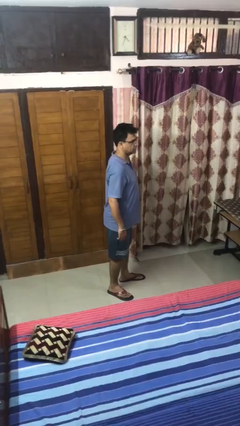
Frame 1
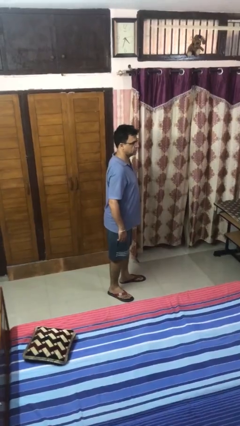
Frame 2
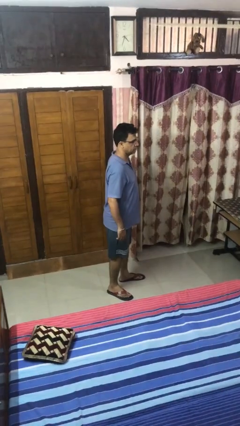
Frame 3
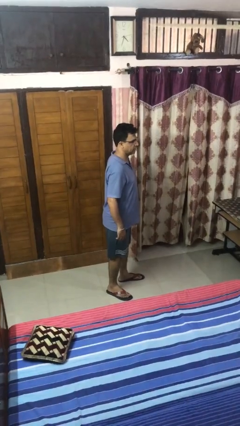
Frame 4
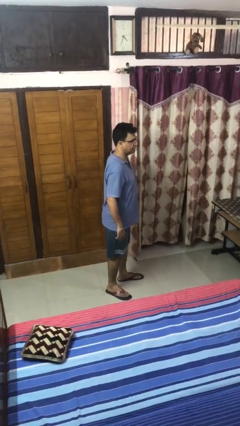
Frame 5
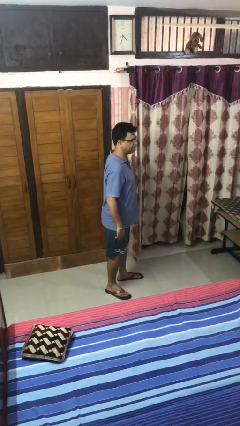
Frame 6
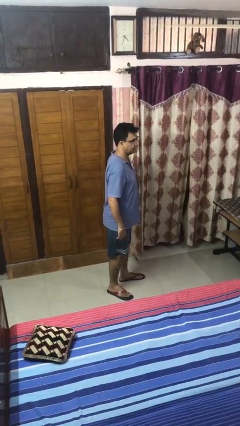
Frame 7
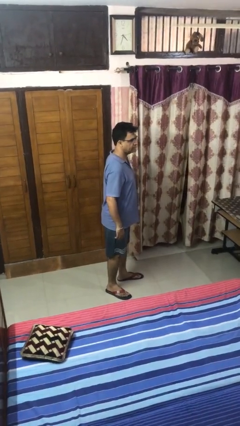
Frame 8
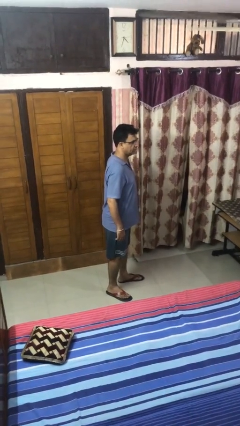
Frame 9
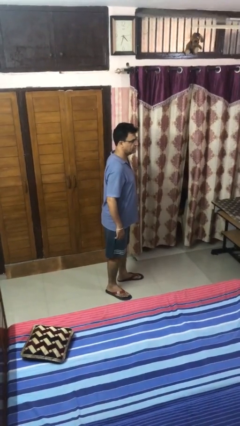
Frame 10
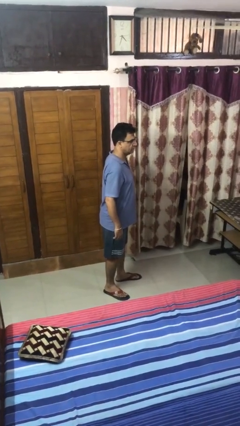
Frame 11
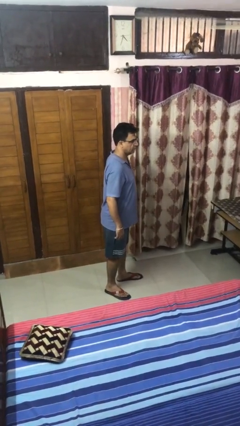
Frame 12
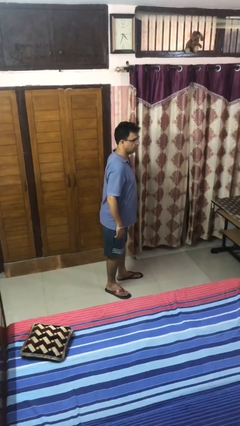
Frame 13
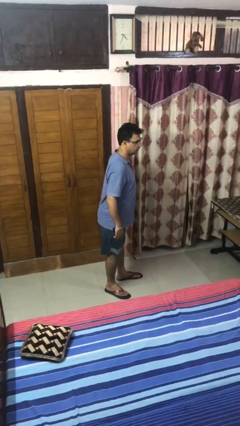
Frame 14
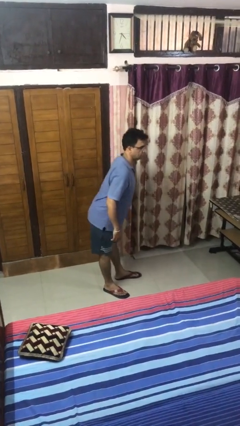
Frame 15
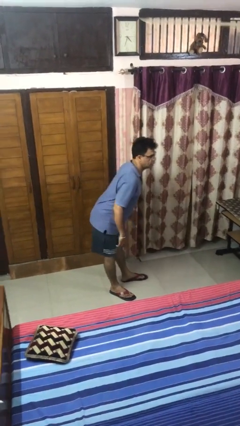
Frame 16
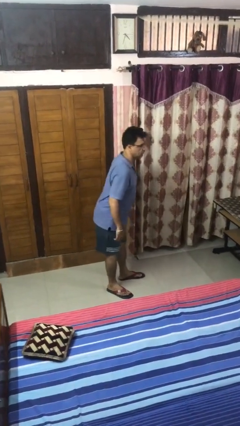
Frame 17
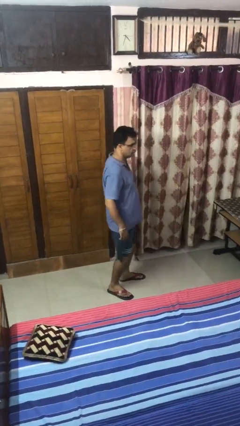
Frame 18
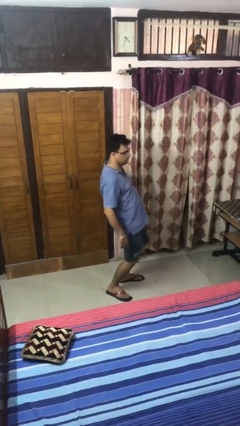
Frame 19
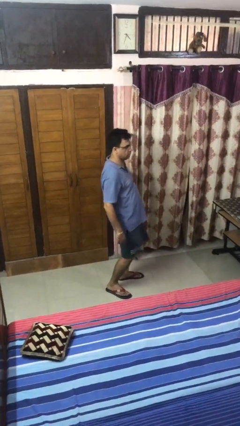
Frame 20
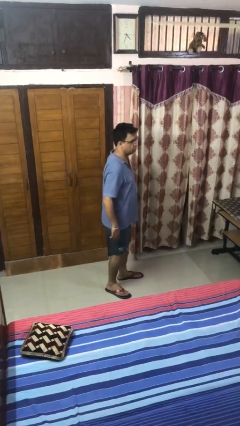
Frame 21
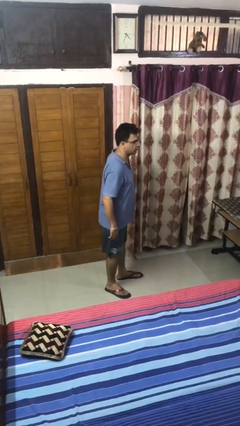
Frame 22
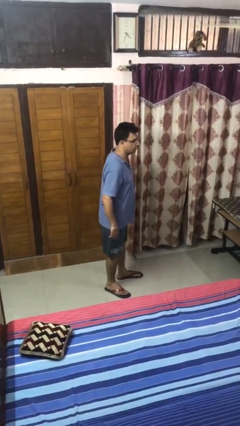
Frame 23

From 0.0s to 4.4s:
person wiggles hips

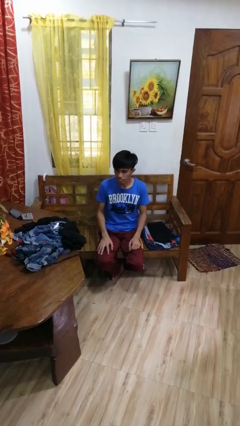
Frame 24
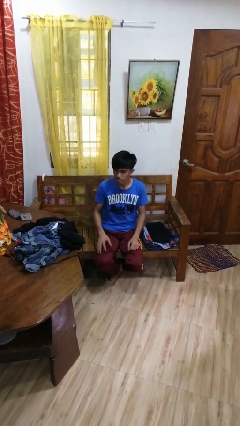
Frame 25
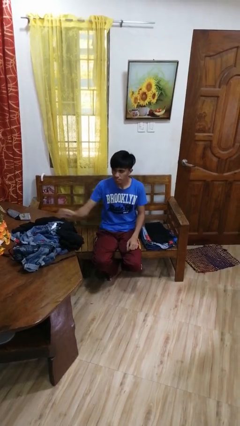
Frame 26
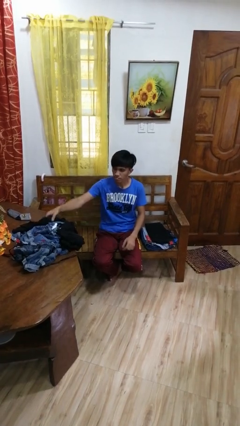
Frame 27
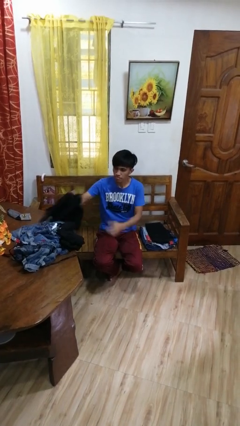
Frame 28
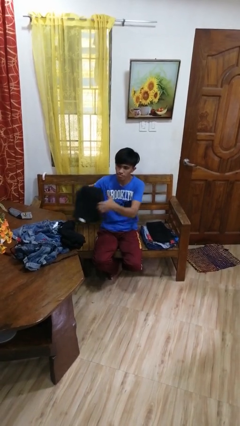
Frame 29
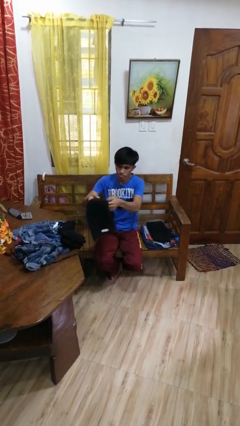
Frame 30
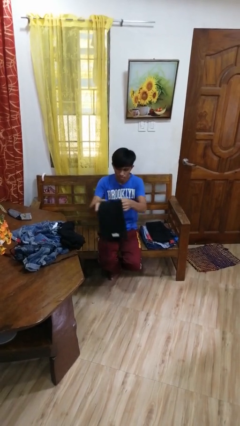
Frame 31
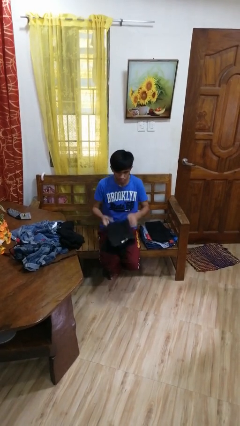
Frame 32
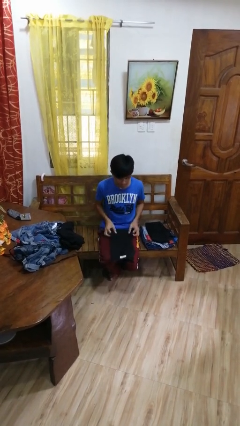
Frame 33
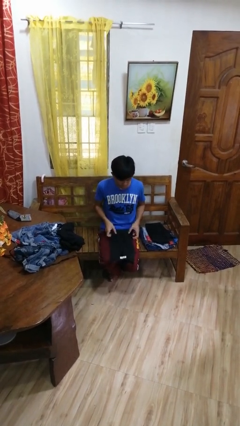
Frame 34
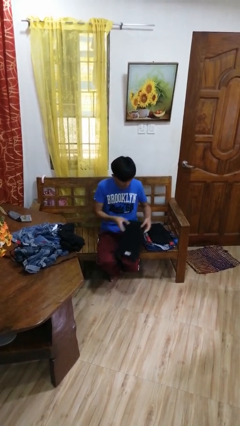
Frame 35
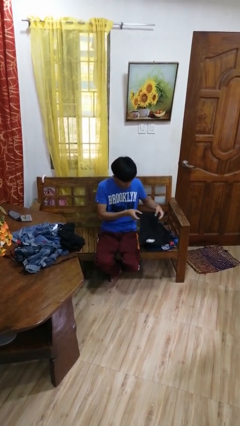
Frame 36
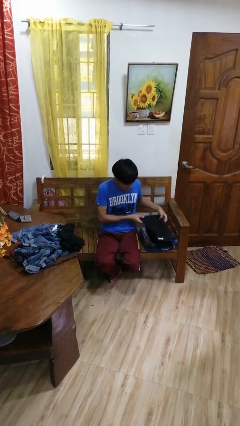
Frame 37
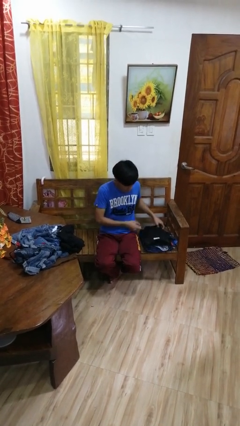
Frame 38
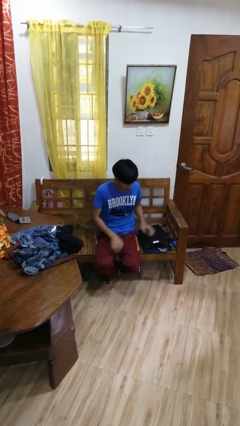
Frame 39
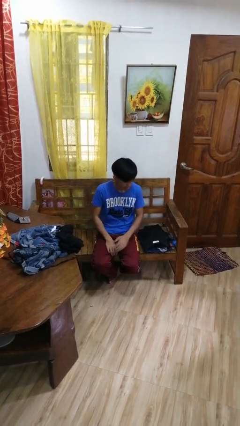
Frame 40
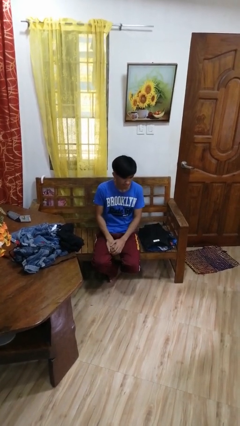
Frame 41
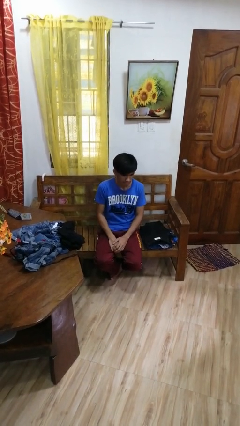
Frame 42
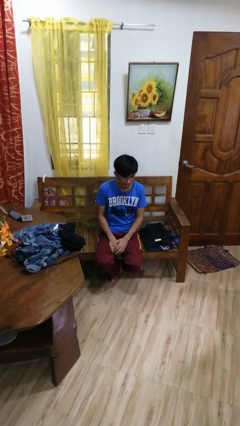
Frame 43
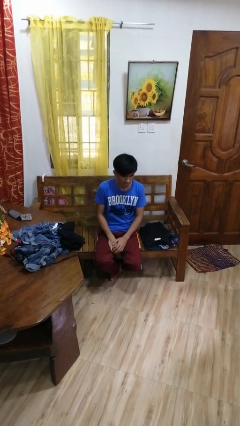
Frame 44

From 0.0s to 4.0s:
person folds shirt

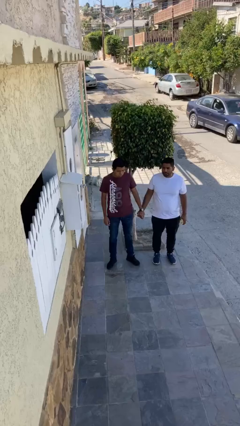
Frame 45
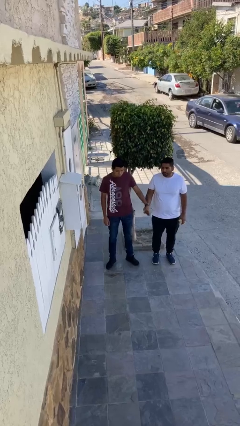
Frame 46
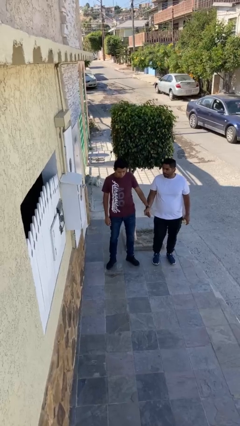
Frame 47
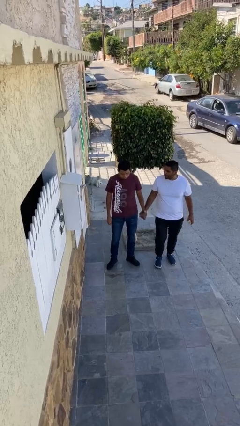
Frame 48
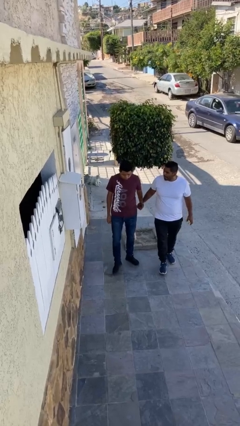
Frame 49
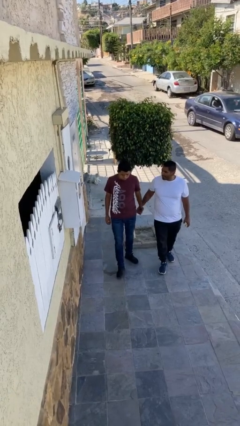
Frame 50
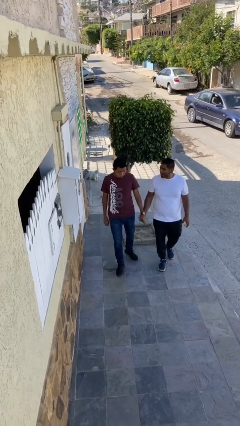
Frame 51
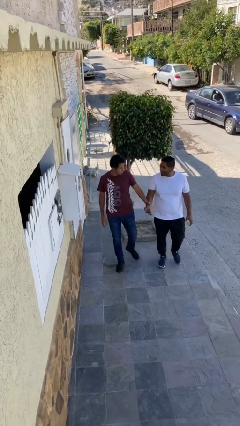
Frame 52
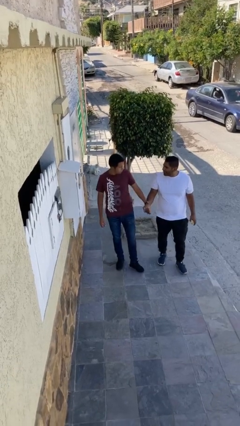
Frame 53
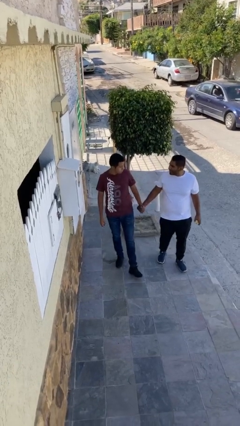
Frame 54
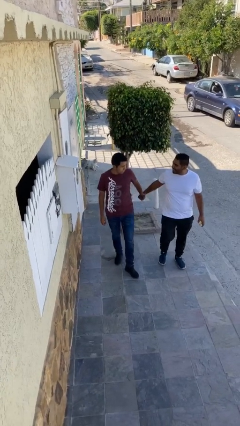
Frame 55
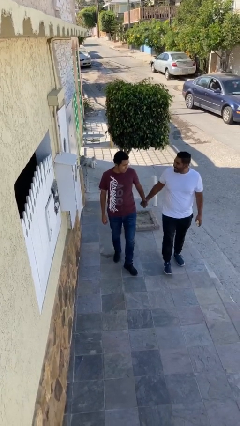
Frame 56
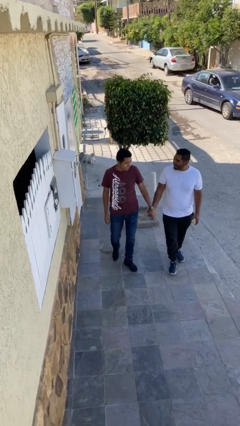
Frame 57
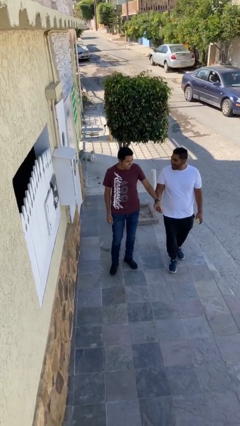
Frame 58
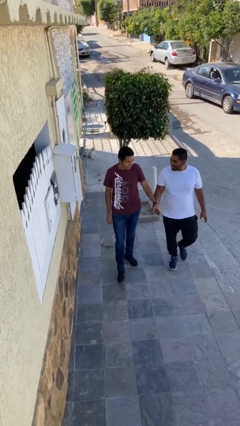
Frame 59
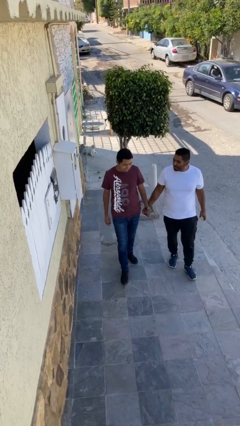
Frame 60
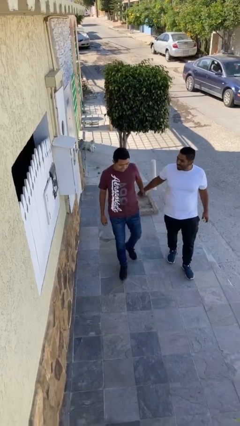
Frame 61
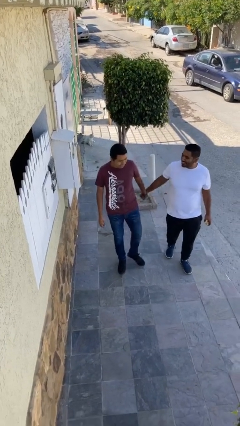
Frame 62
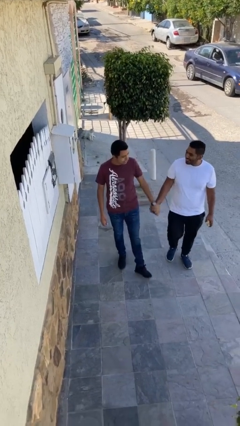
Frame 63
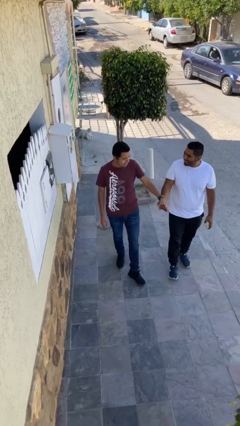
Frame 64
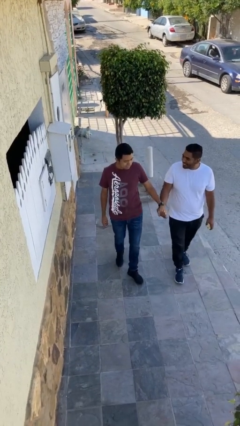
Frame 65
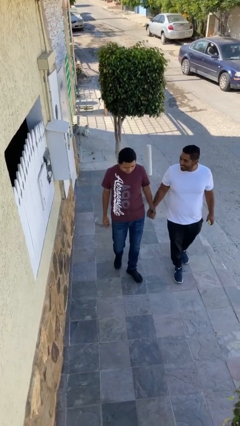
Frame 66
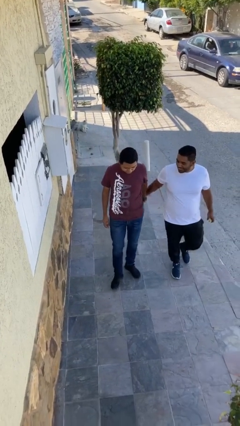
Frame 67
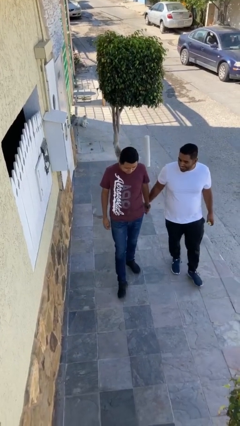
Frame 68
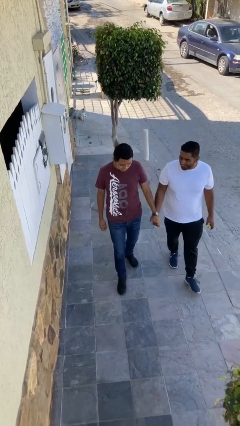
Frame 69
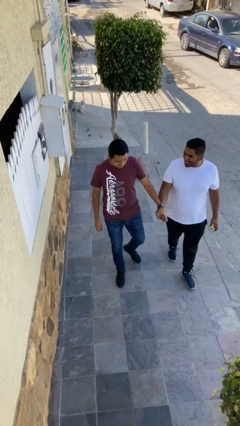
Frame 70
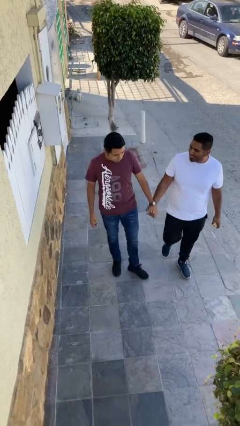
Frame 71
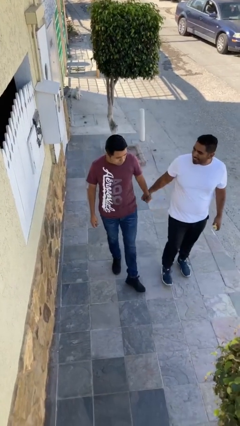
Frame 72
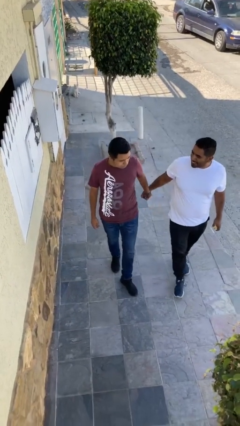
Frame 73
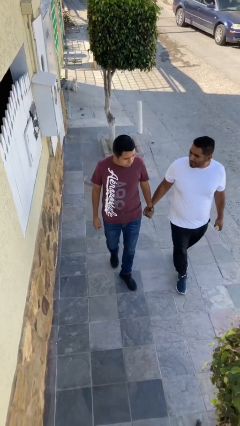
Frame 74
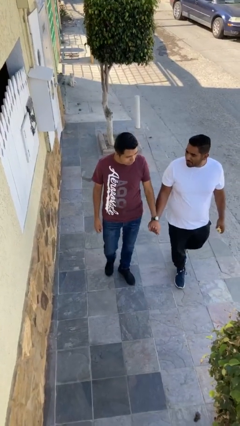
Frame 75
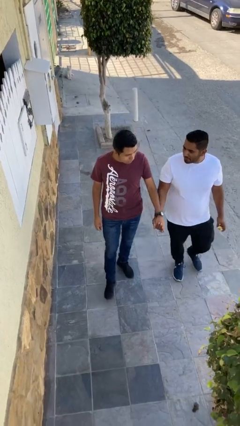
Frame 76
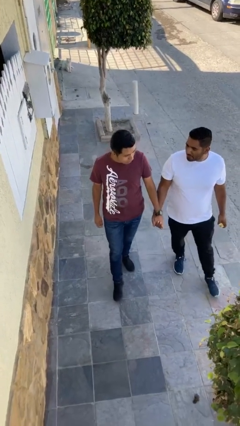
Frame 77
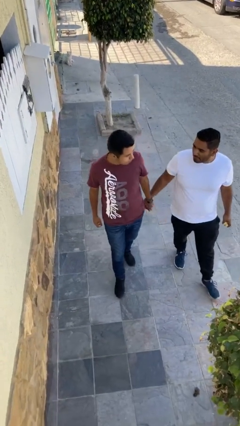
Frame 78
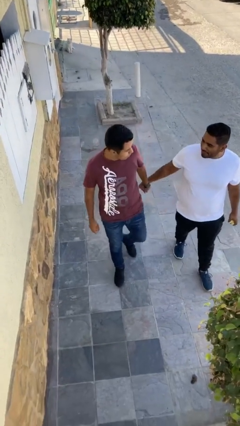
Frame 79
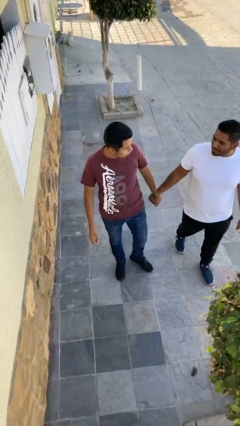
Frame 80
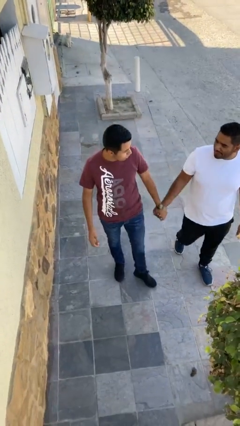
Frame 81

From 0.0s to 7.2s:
person holds hand

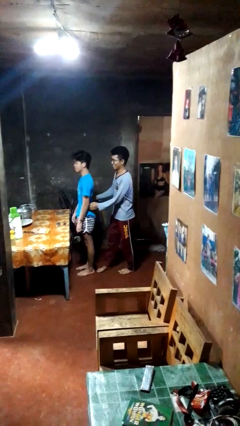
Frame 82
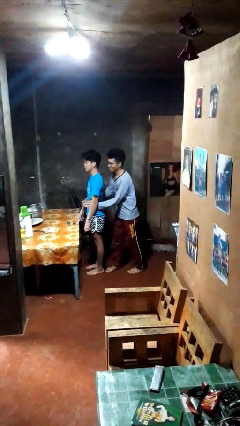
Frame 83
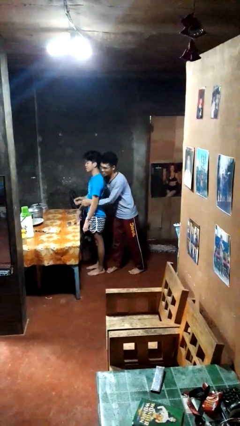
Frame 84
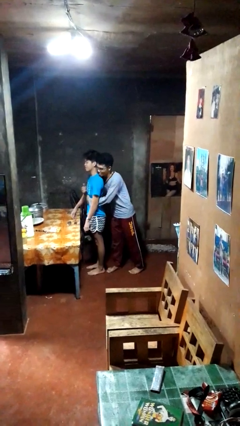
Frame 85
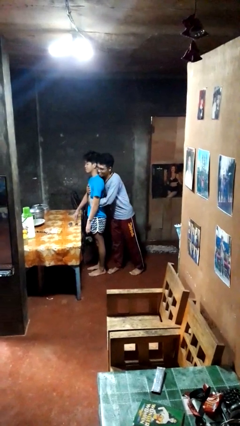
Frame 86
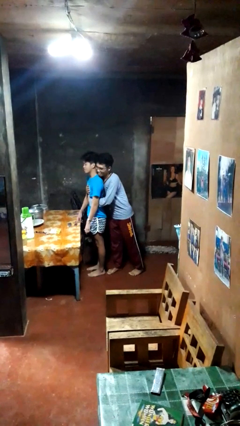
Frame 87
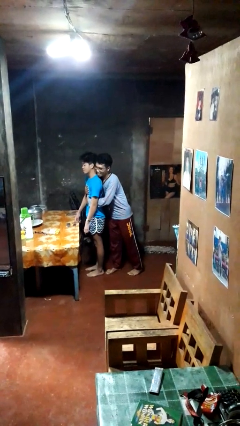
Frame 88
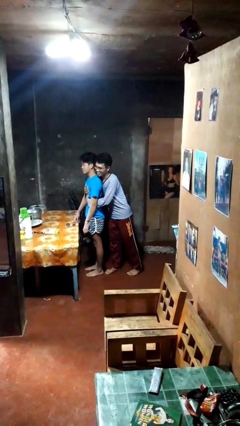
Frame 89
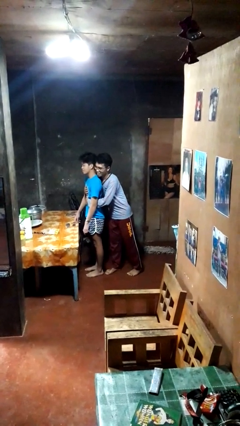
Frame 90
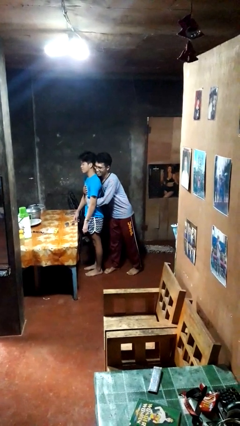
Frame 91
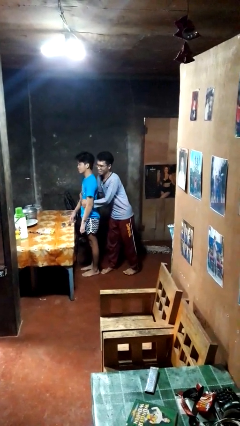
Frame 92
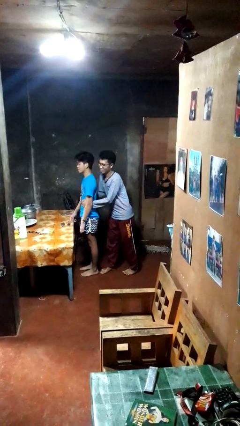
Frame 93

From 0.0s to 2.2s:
person hugs person from behind
